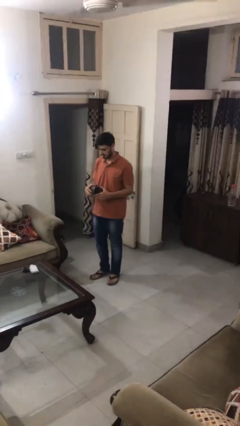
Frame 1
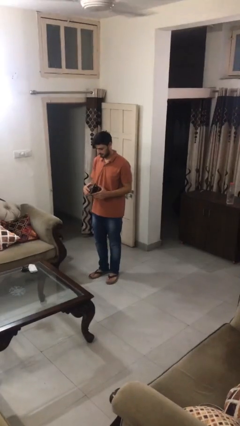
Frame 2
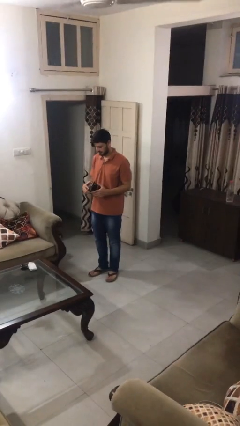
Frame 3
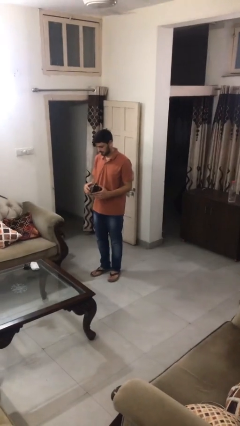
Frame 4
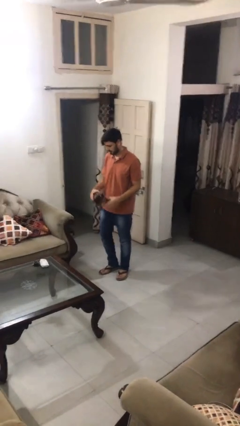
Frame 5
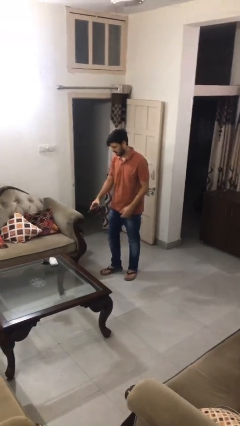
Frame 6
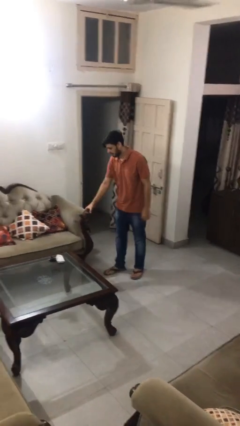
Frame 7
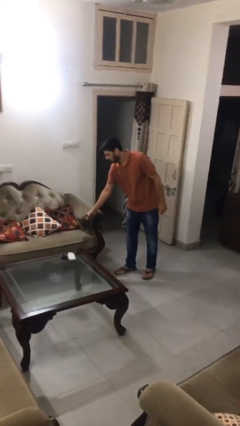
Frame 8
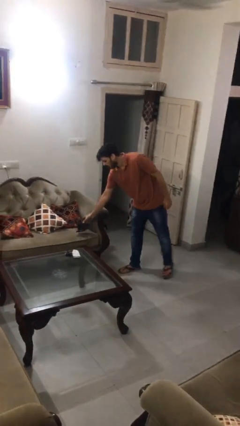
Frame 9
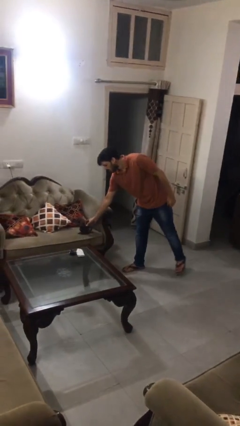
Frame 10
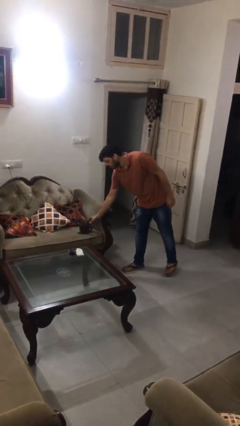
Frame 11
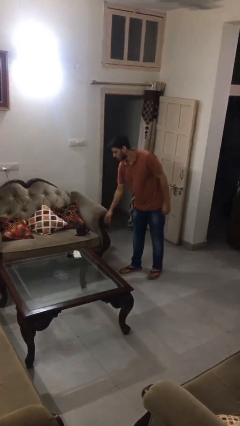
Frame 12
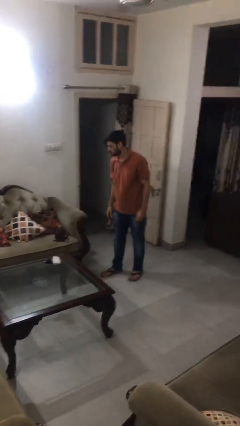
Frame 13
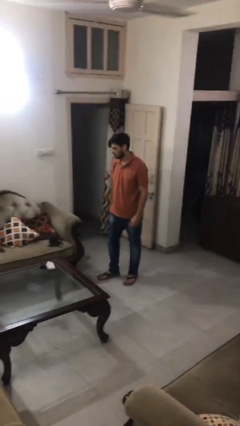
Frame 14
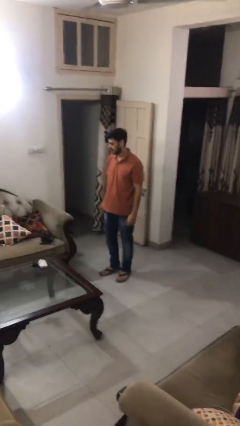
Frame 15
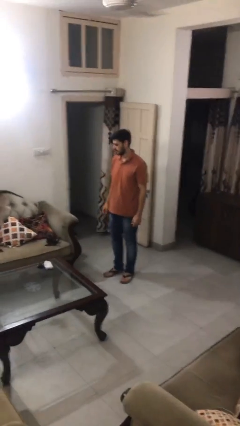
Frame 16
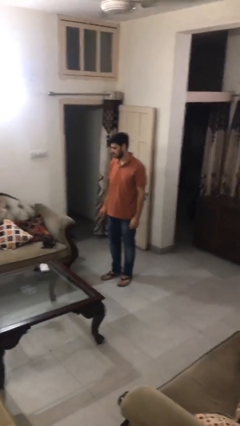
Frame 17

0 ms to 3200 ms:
person puts down object on couch

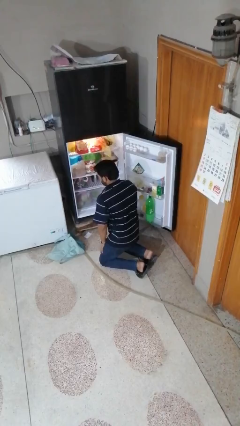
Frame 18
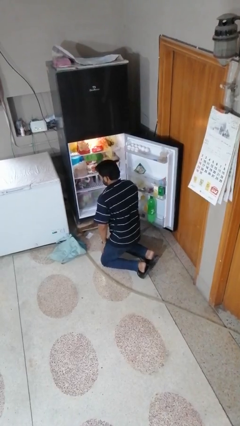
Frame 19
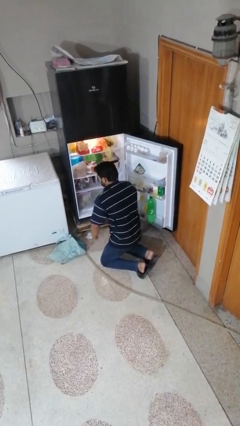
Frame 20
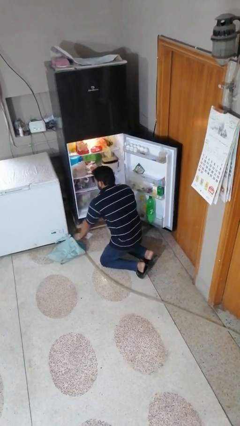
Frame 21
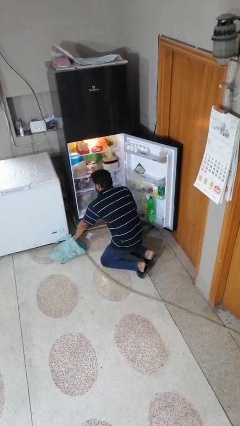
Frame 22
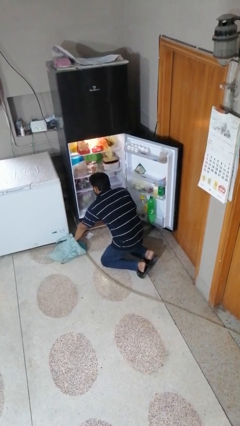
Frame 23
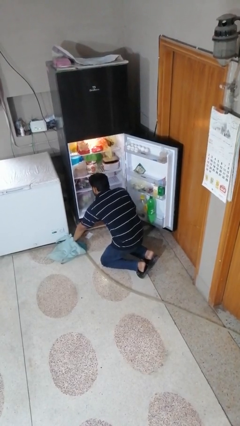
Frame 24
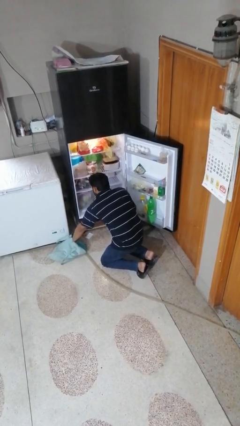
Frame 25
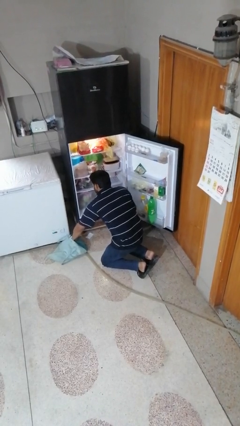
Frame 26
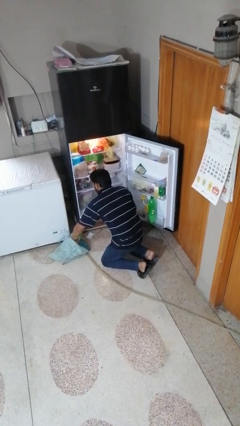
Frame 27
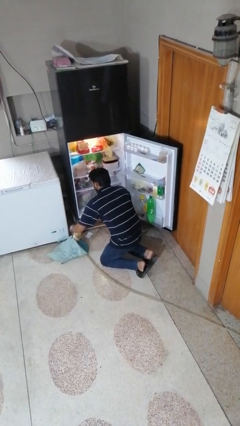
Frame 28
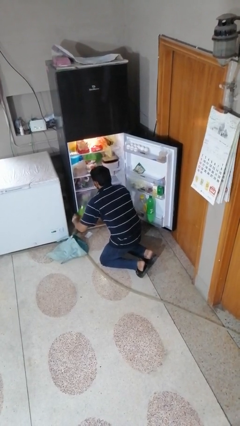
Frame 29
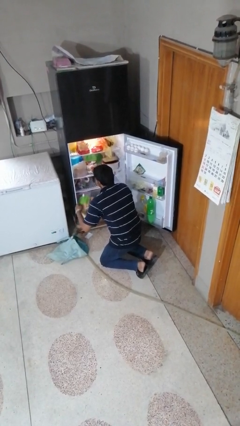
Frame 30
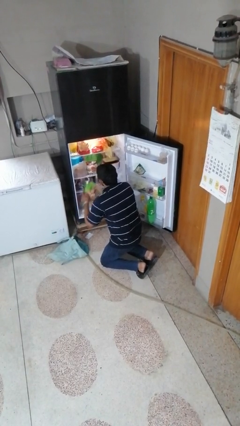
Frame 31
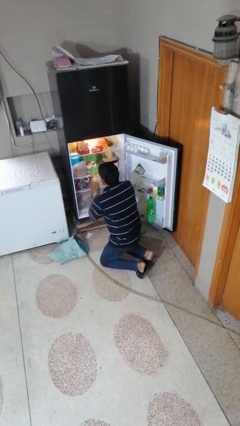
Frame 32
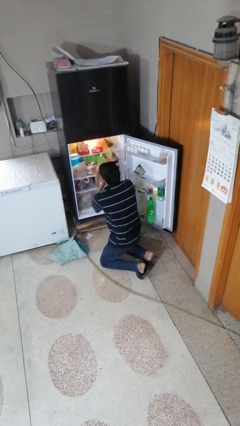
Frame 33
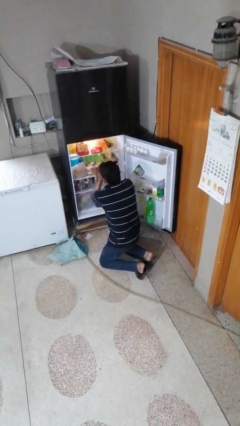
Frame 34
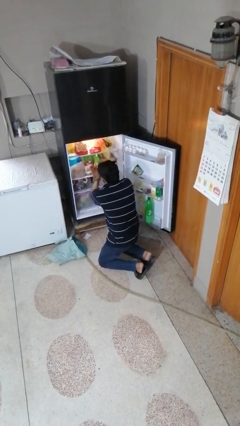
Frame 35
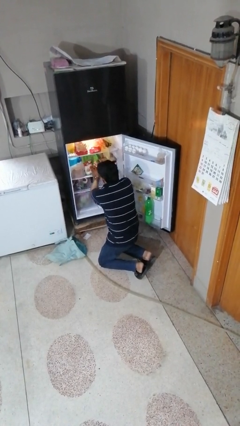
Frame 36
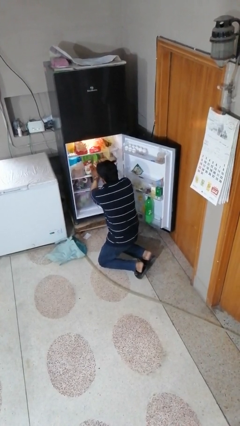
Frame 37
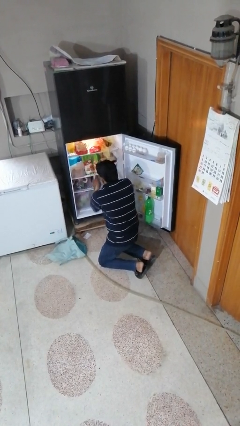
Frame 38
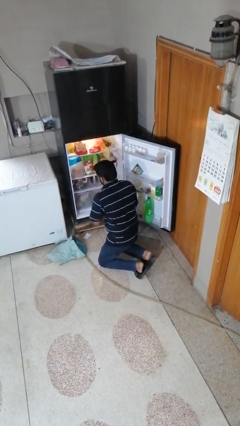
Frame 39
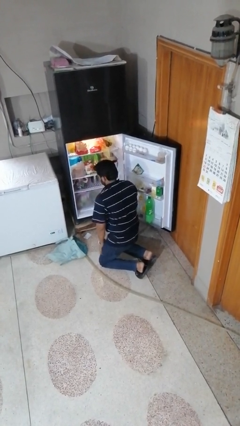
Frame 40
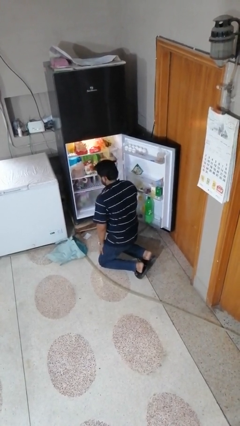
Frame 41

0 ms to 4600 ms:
person loads groceries into refrigerator

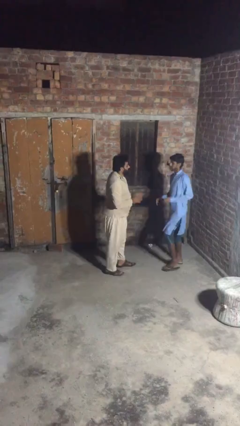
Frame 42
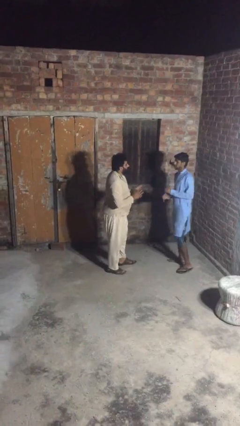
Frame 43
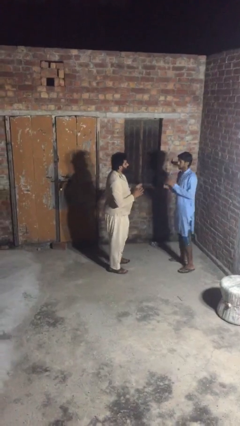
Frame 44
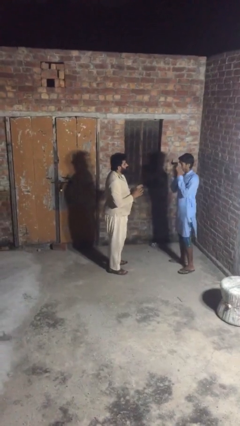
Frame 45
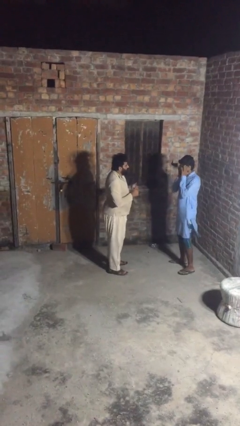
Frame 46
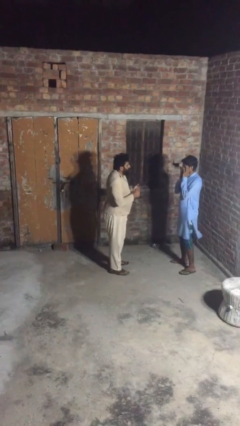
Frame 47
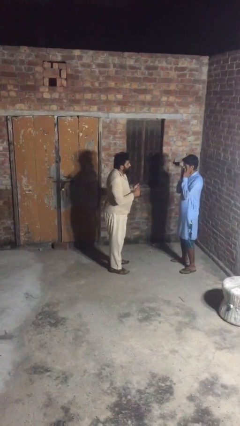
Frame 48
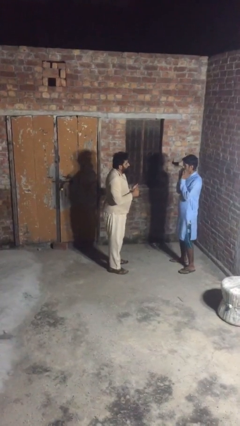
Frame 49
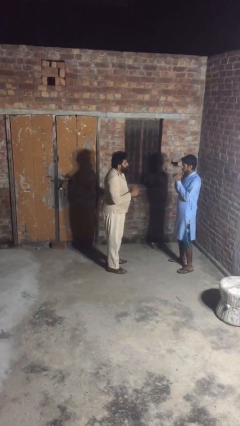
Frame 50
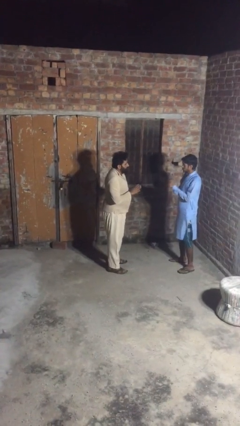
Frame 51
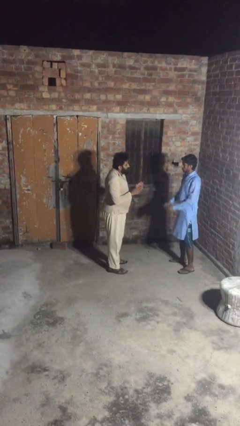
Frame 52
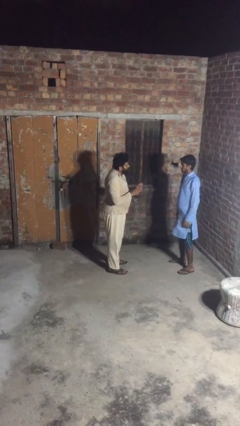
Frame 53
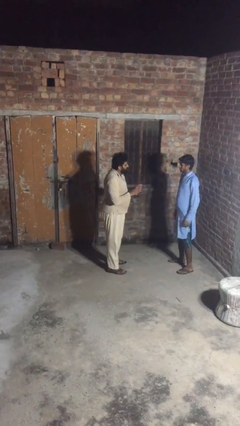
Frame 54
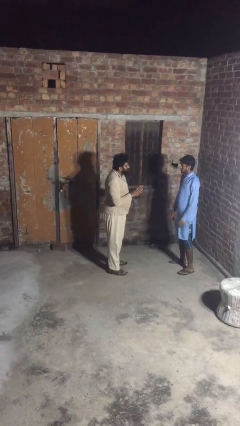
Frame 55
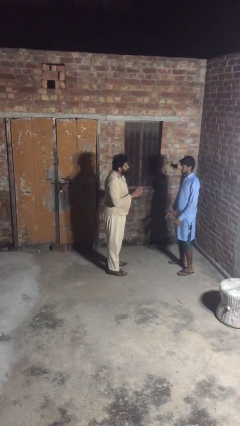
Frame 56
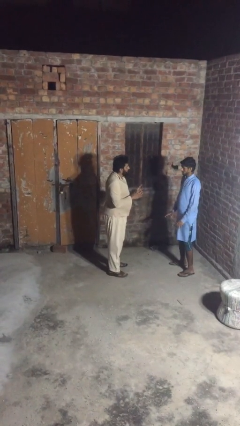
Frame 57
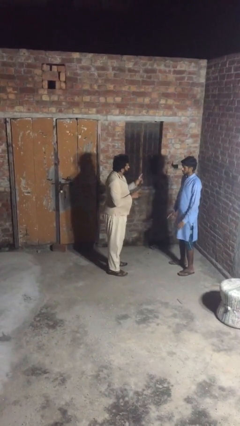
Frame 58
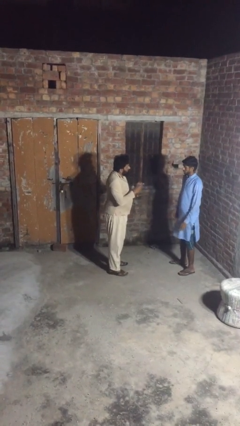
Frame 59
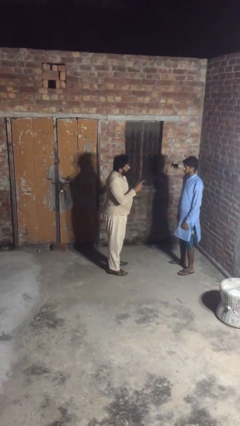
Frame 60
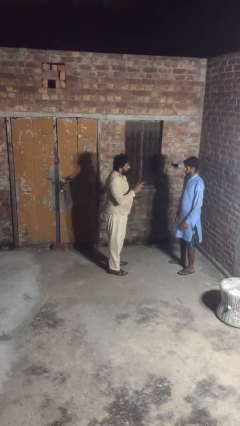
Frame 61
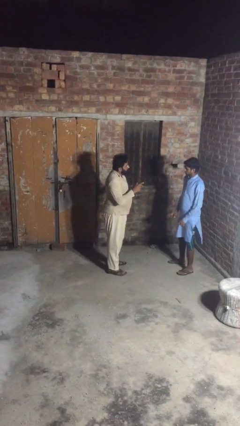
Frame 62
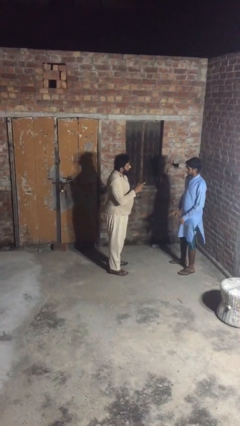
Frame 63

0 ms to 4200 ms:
person talks to person

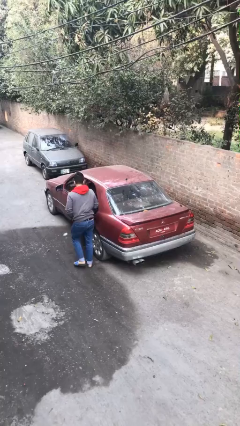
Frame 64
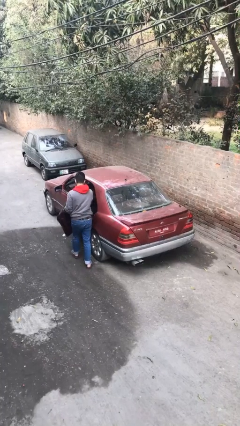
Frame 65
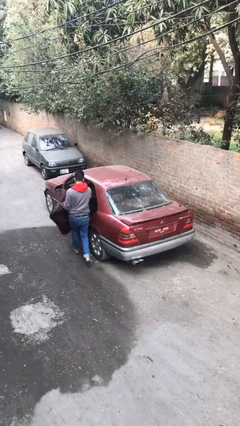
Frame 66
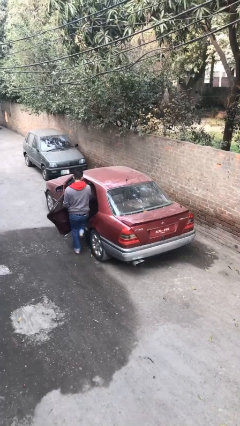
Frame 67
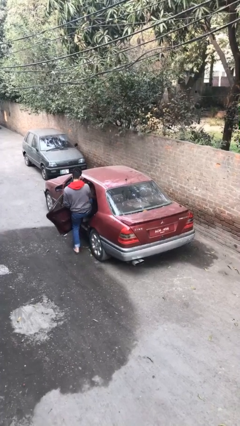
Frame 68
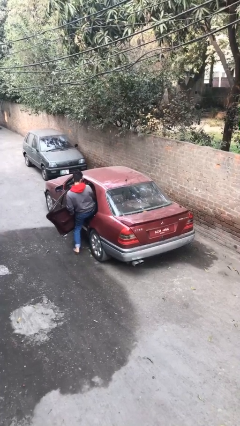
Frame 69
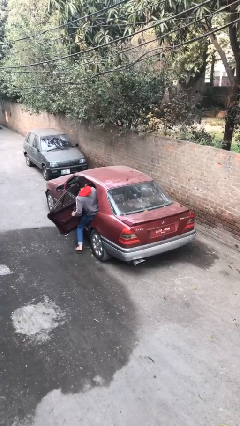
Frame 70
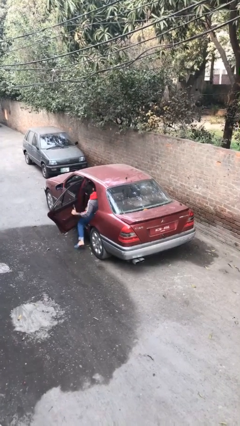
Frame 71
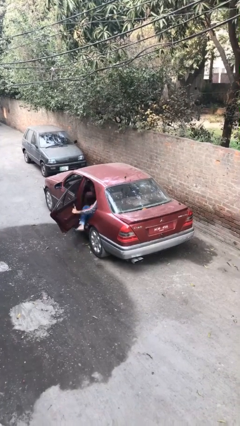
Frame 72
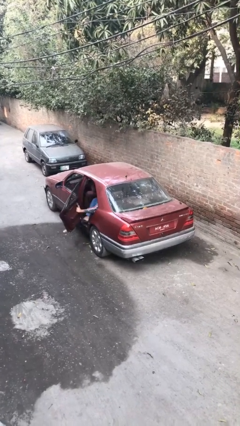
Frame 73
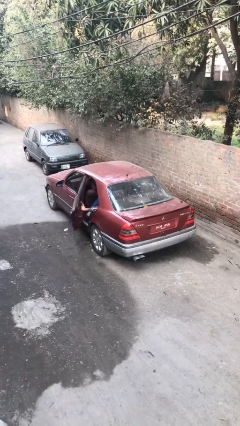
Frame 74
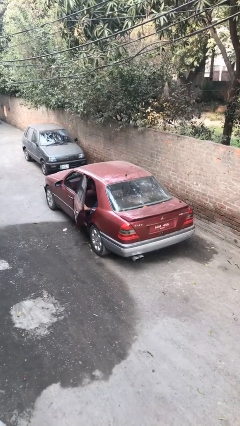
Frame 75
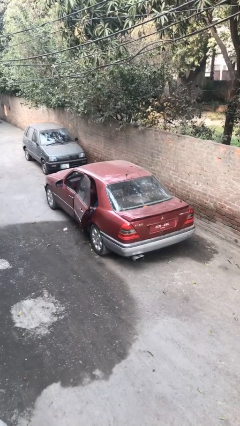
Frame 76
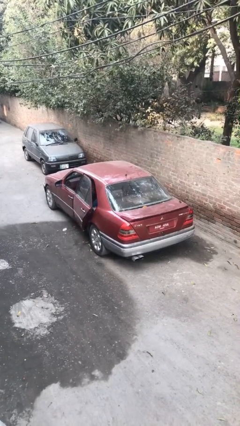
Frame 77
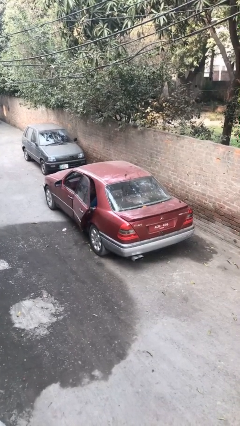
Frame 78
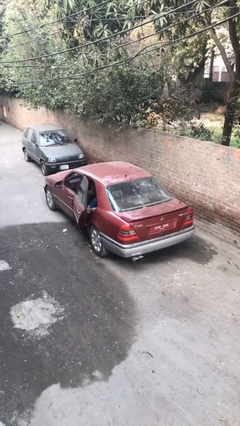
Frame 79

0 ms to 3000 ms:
car picks up person

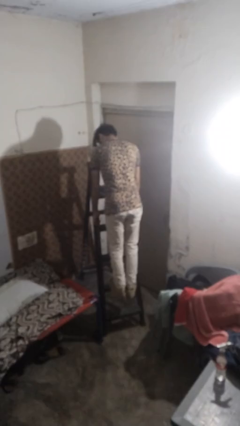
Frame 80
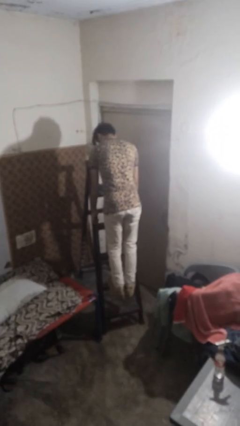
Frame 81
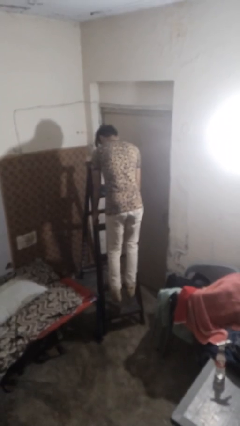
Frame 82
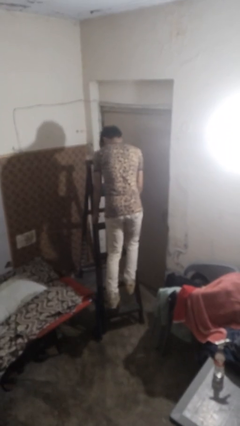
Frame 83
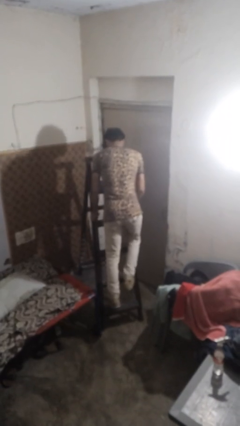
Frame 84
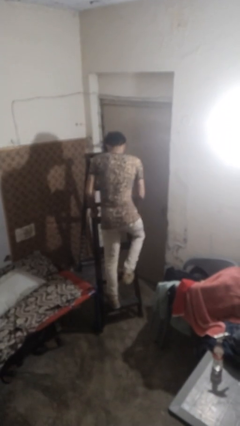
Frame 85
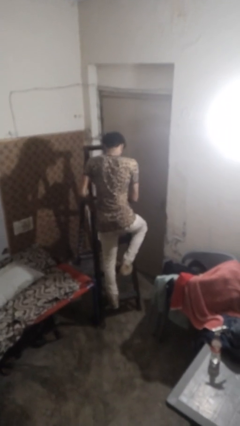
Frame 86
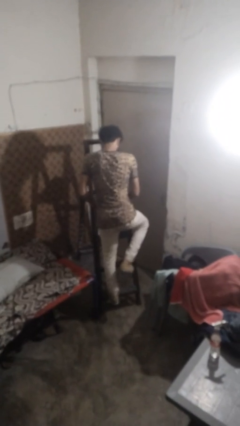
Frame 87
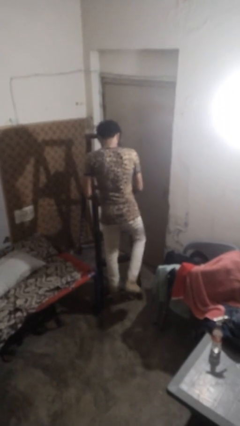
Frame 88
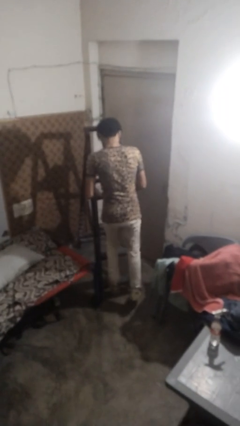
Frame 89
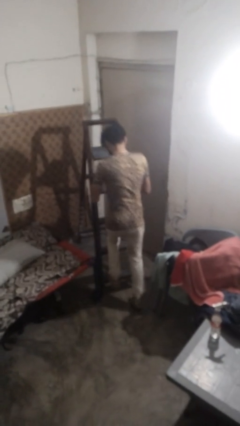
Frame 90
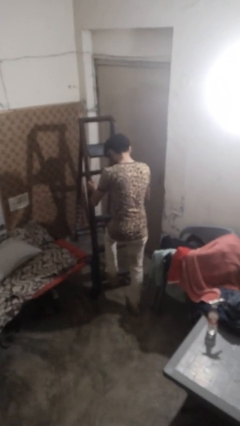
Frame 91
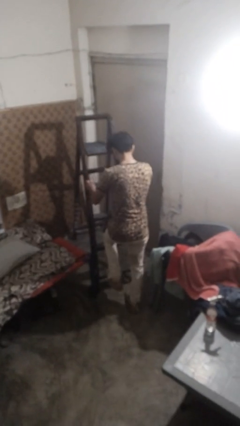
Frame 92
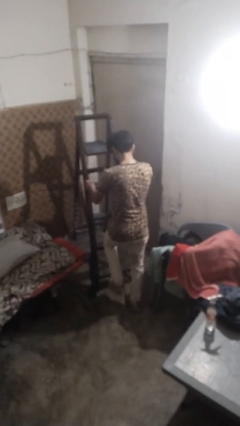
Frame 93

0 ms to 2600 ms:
person climbs down ladder

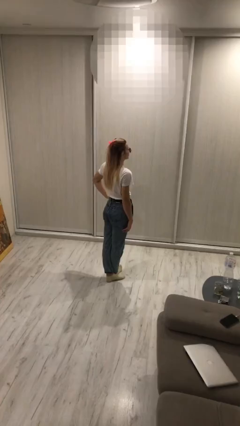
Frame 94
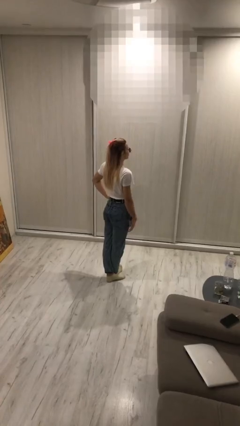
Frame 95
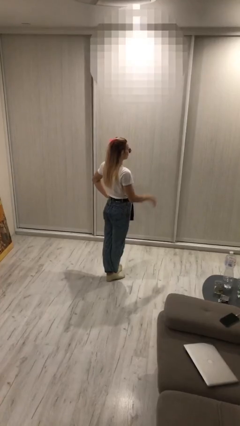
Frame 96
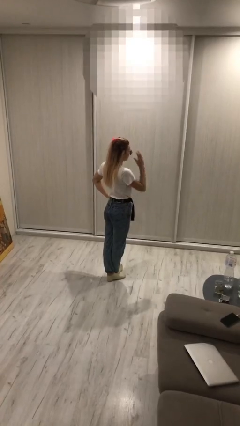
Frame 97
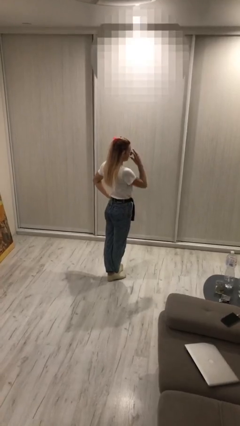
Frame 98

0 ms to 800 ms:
person takes off sunglasses
